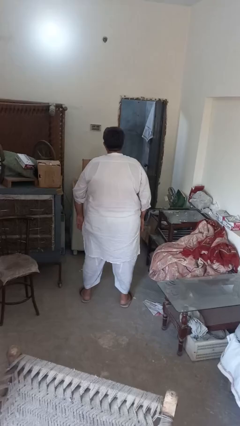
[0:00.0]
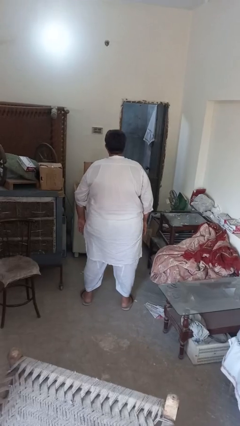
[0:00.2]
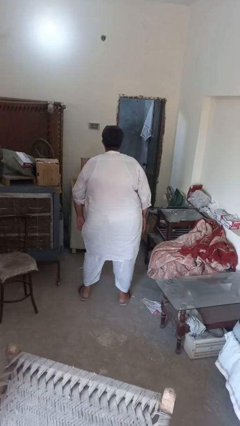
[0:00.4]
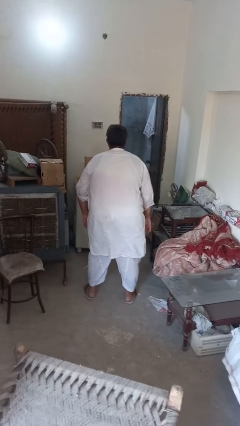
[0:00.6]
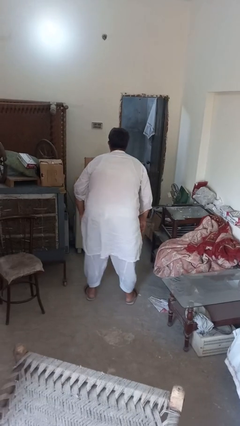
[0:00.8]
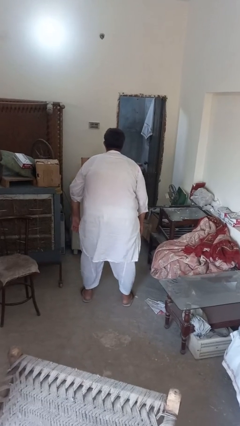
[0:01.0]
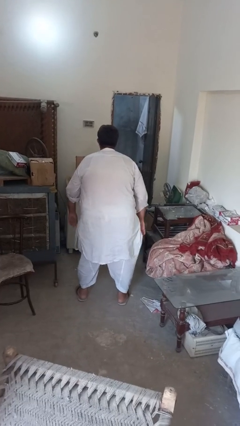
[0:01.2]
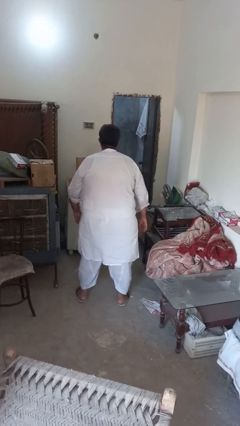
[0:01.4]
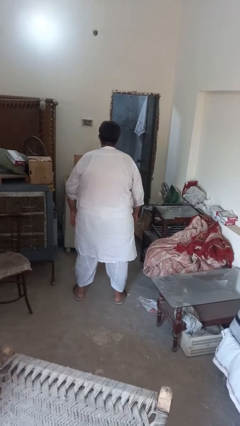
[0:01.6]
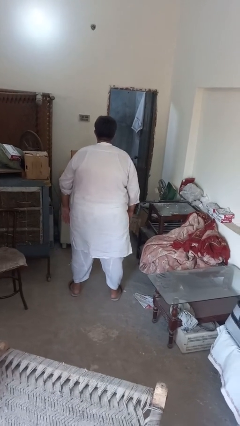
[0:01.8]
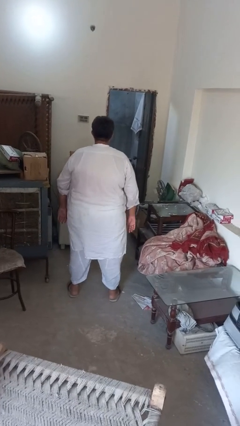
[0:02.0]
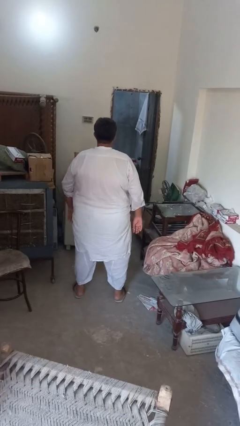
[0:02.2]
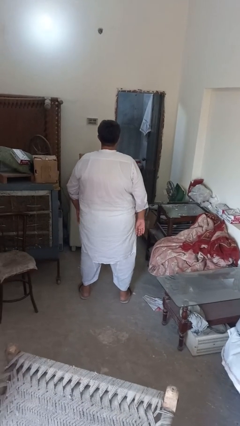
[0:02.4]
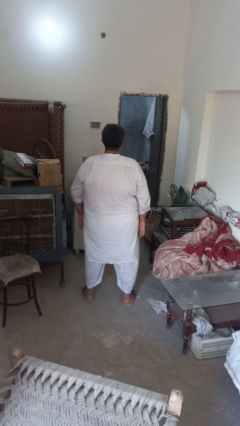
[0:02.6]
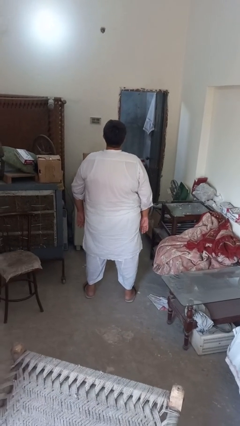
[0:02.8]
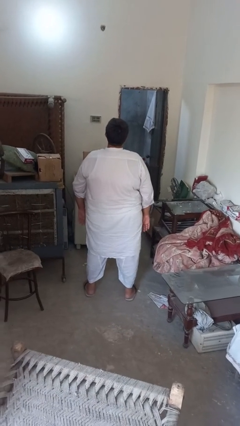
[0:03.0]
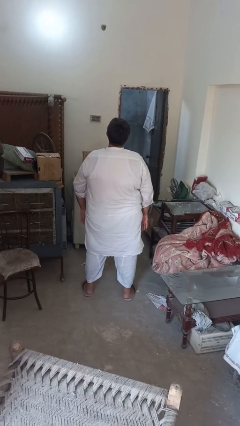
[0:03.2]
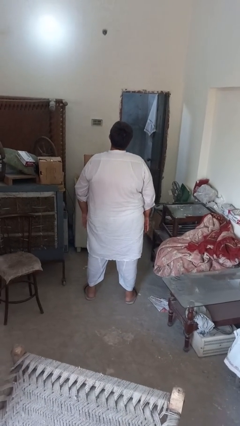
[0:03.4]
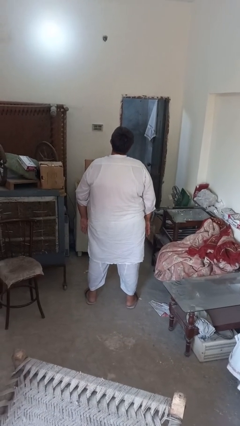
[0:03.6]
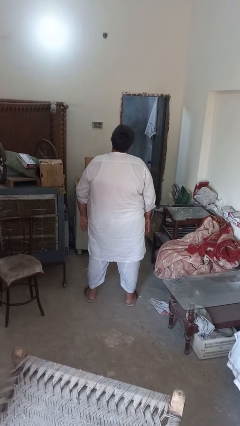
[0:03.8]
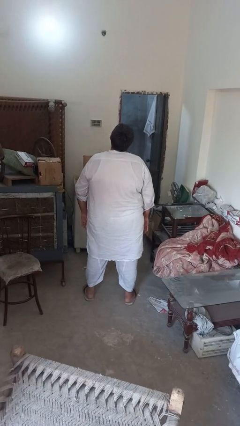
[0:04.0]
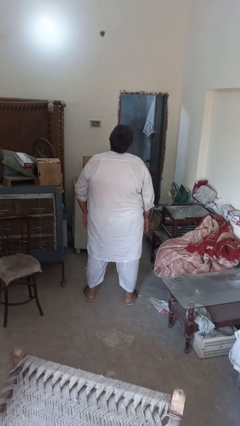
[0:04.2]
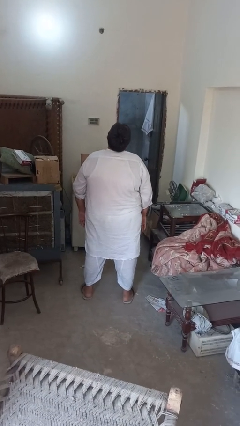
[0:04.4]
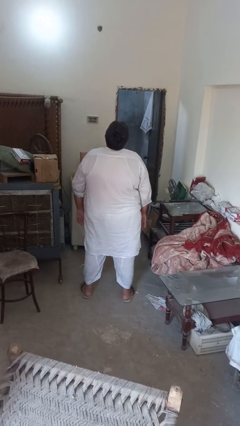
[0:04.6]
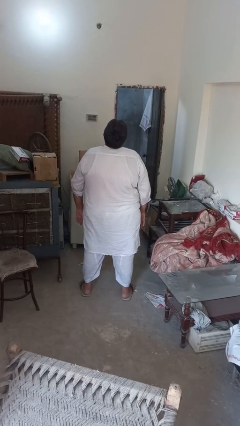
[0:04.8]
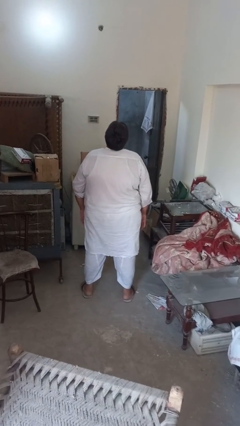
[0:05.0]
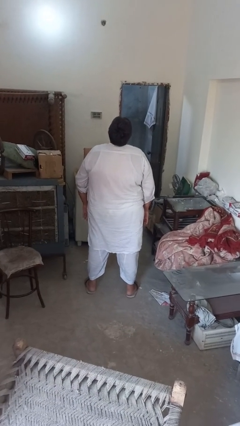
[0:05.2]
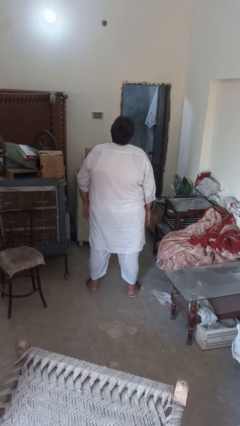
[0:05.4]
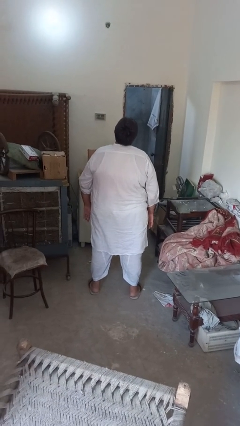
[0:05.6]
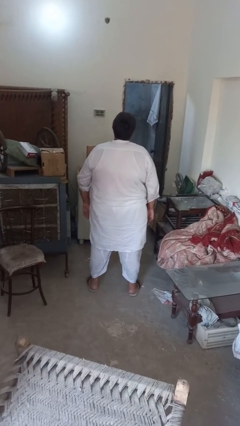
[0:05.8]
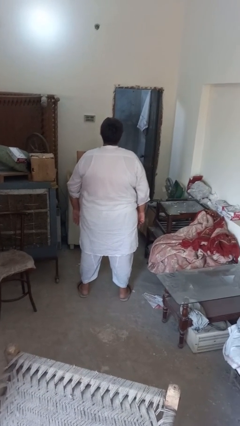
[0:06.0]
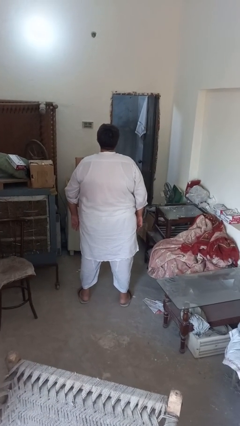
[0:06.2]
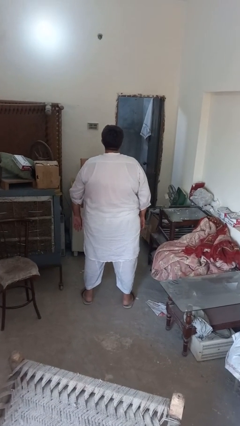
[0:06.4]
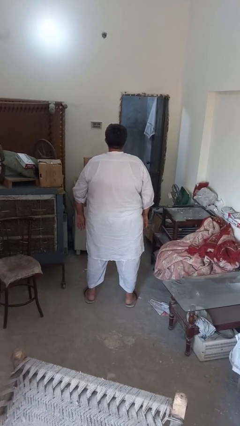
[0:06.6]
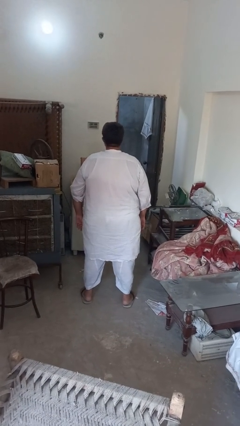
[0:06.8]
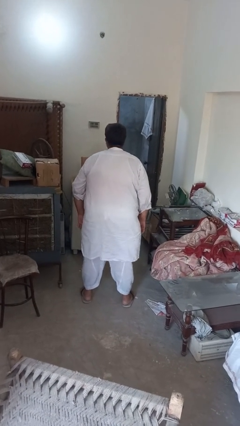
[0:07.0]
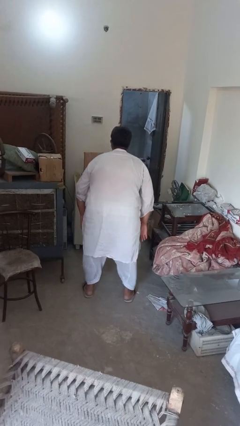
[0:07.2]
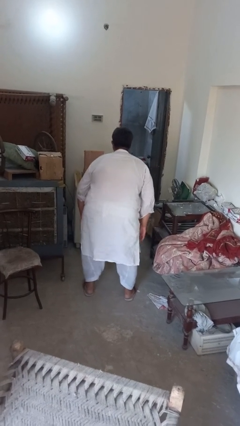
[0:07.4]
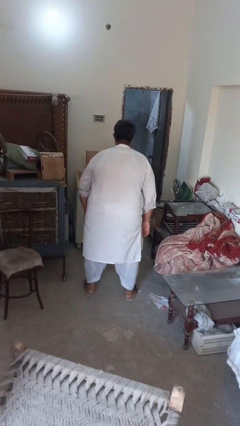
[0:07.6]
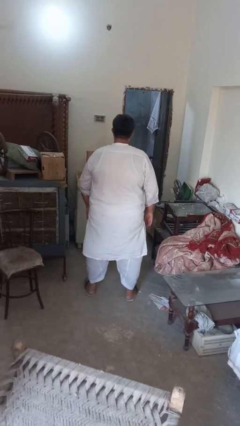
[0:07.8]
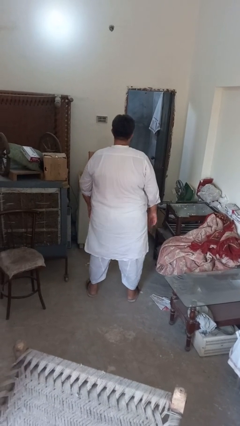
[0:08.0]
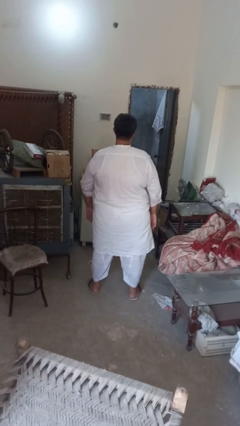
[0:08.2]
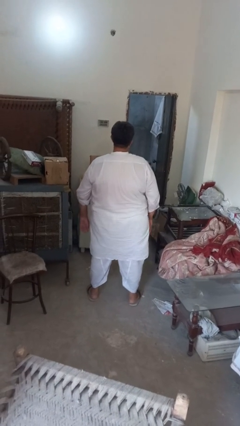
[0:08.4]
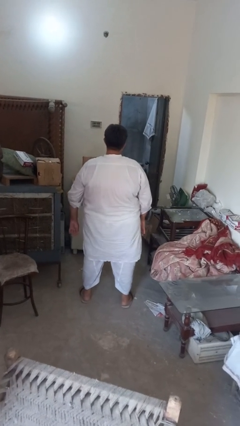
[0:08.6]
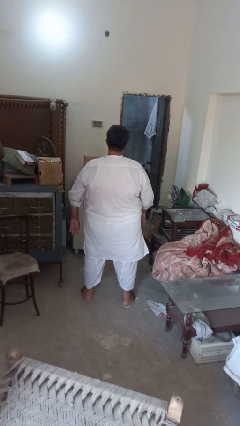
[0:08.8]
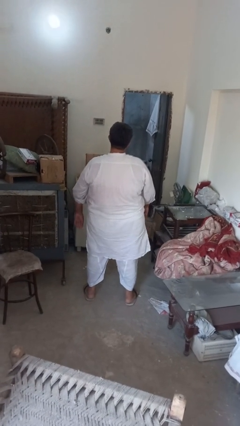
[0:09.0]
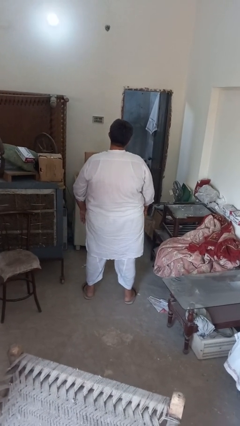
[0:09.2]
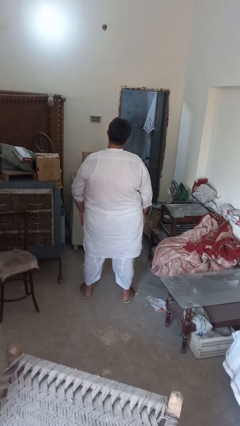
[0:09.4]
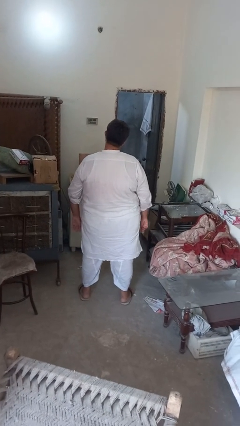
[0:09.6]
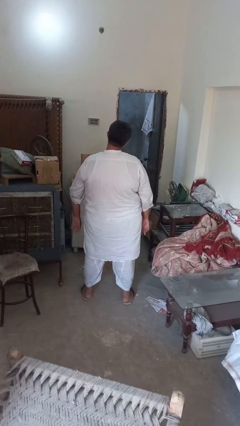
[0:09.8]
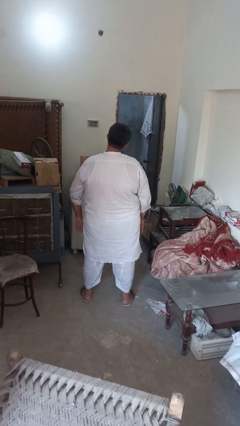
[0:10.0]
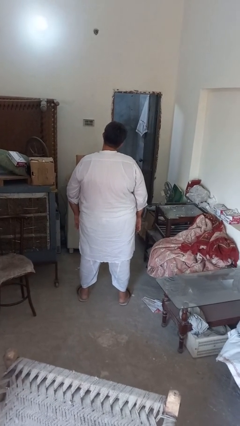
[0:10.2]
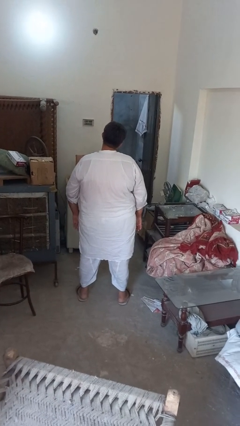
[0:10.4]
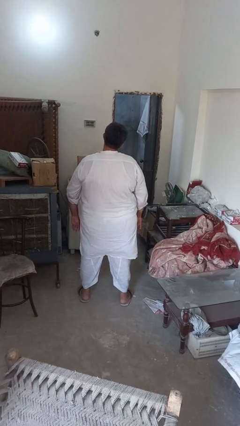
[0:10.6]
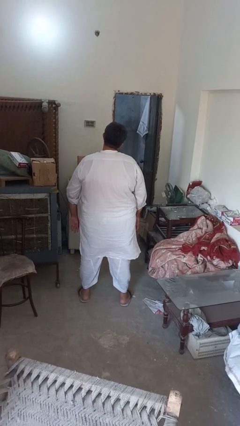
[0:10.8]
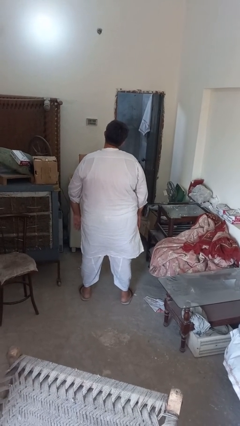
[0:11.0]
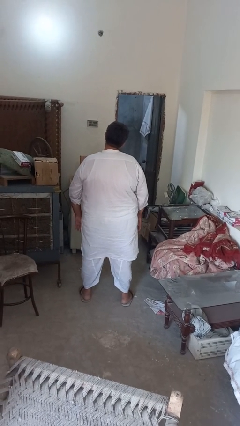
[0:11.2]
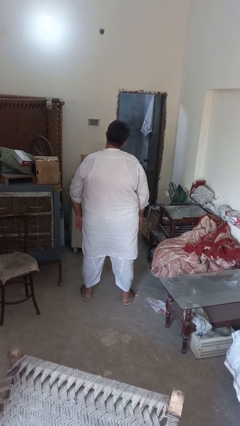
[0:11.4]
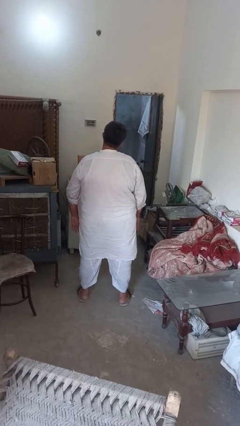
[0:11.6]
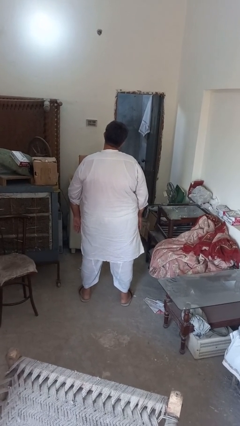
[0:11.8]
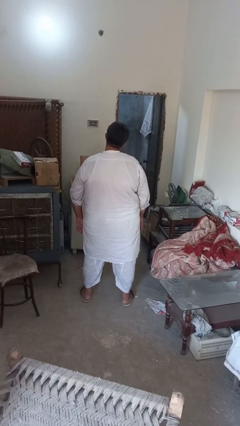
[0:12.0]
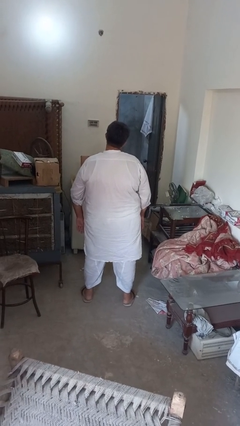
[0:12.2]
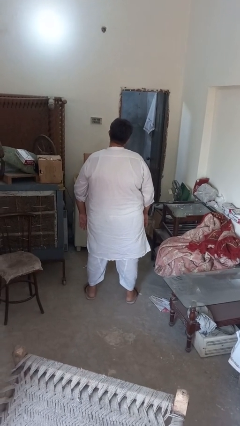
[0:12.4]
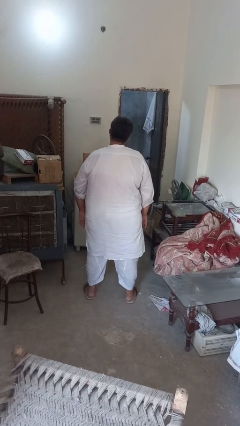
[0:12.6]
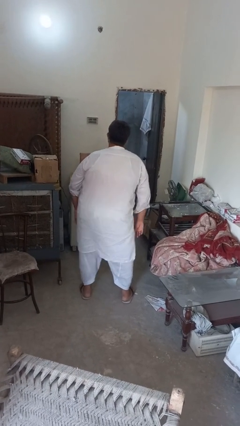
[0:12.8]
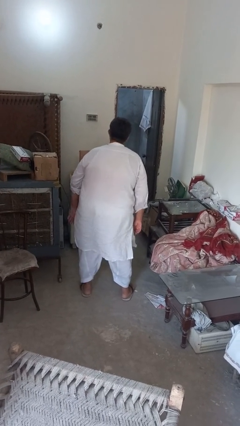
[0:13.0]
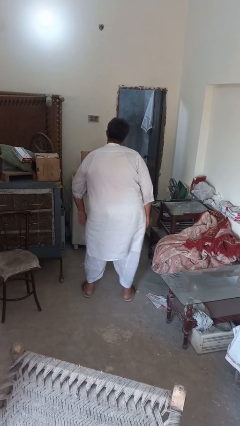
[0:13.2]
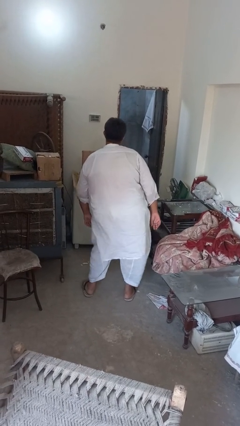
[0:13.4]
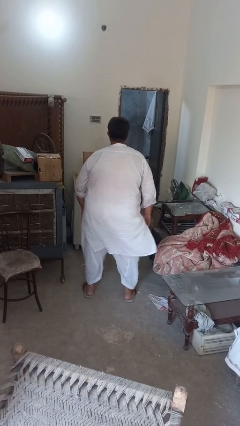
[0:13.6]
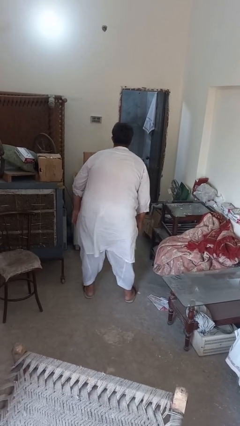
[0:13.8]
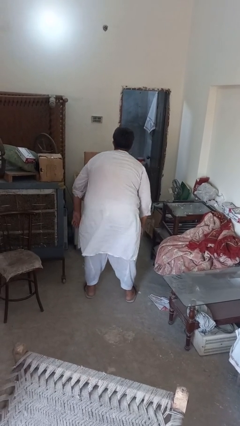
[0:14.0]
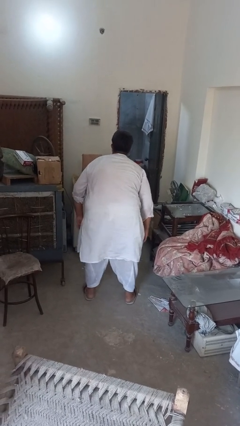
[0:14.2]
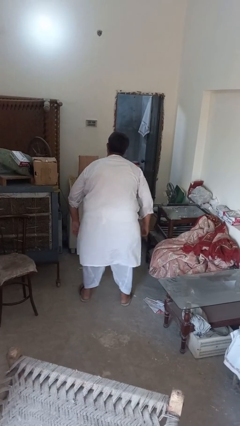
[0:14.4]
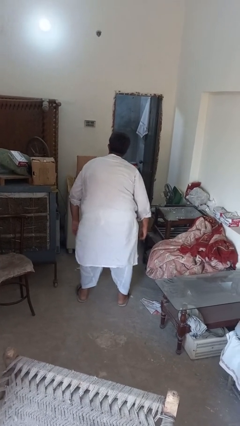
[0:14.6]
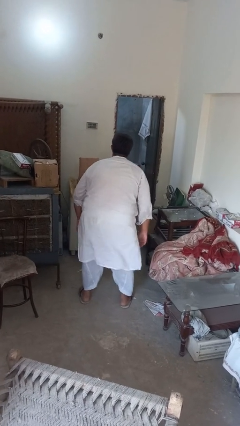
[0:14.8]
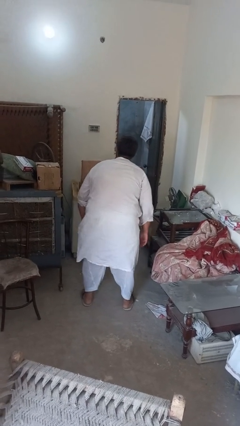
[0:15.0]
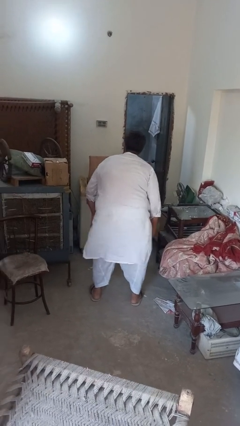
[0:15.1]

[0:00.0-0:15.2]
person wiggles hips

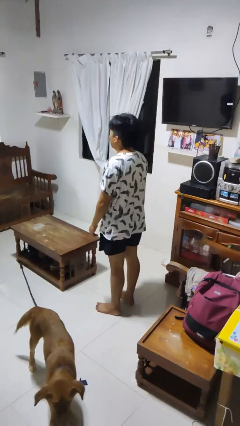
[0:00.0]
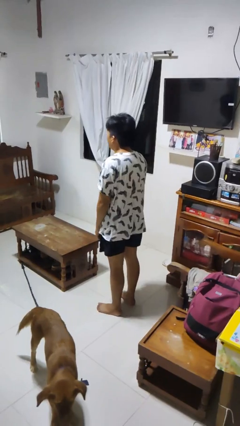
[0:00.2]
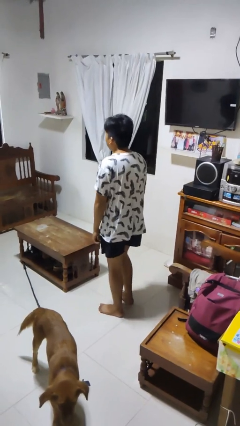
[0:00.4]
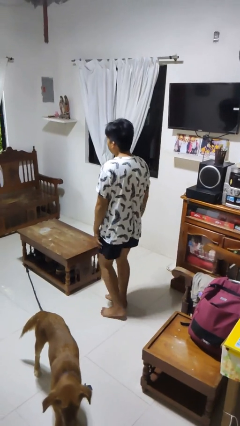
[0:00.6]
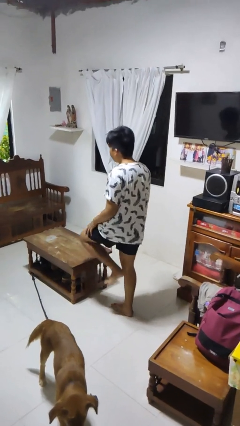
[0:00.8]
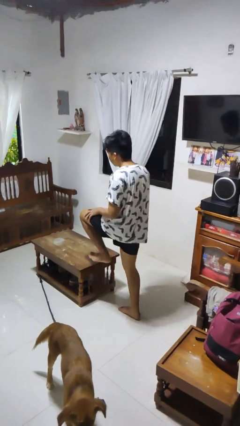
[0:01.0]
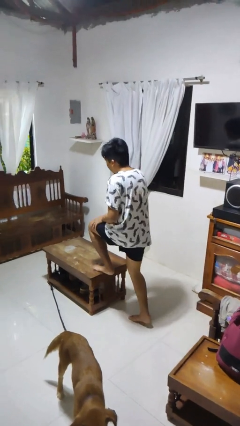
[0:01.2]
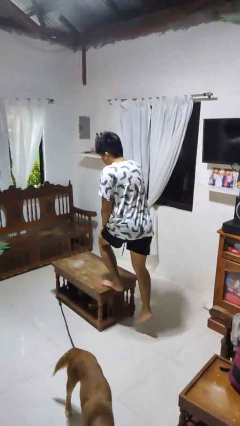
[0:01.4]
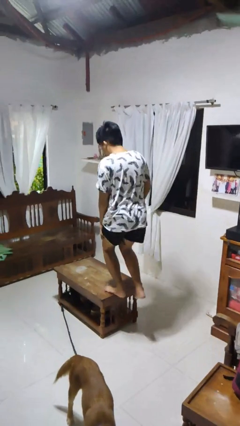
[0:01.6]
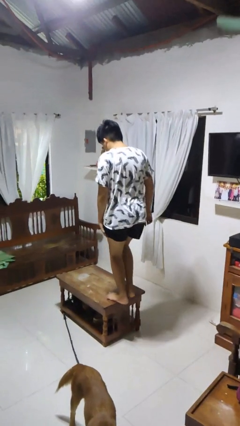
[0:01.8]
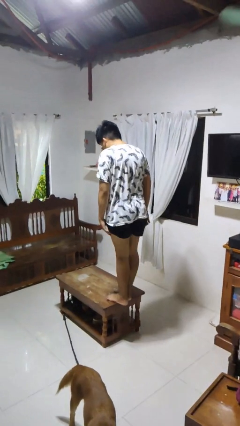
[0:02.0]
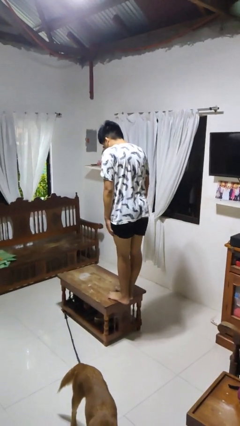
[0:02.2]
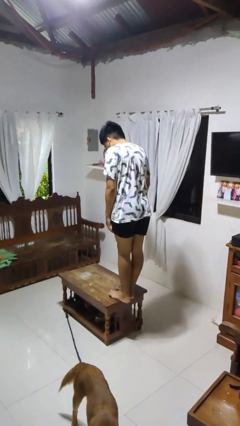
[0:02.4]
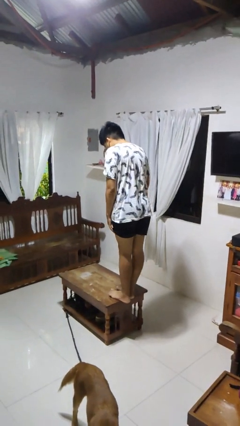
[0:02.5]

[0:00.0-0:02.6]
person climbs on table

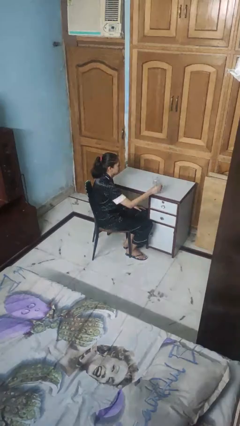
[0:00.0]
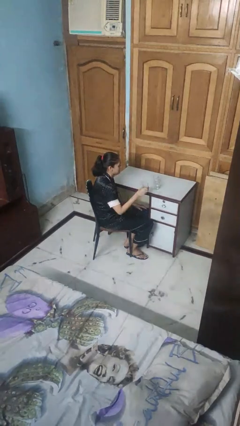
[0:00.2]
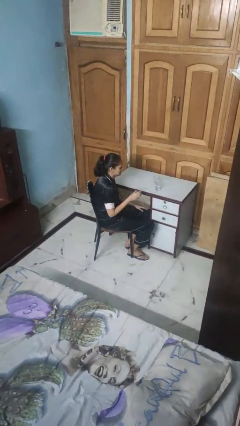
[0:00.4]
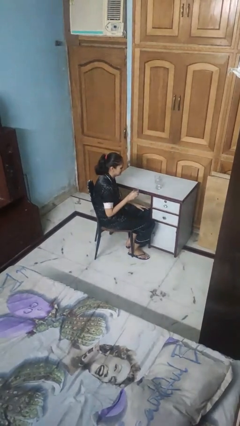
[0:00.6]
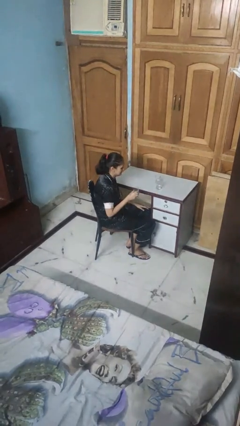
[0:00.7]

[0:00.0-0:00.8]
person picks up object from table
